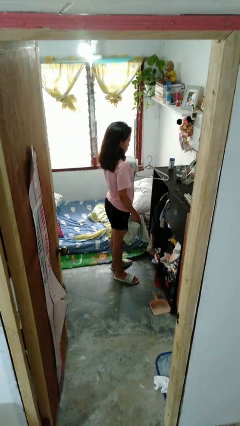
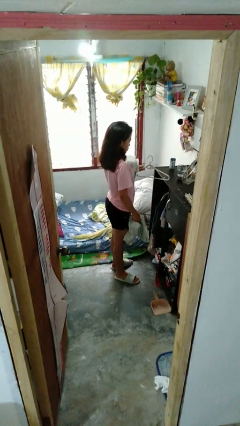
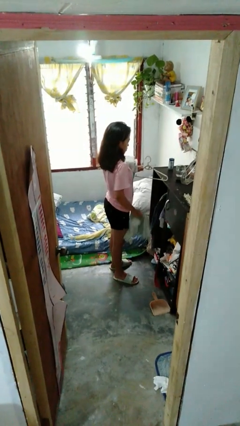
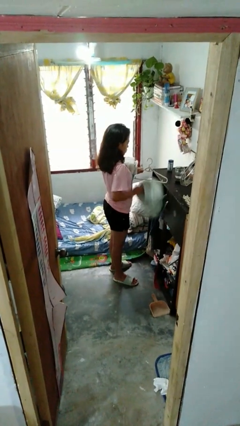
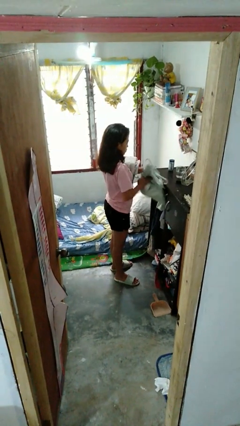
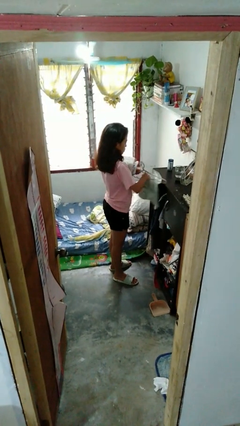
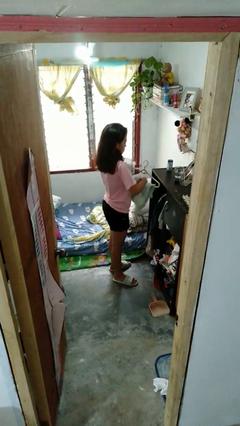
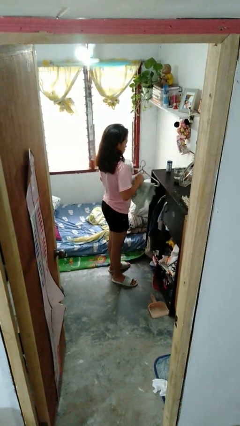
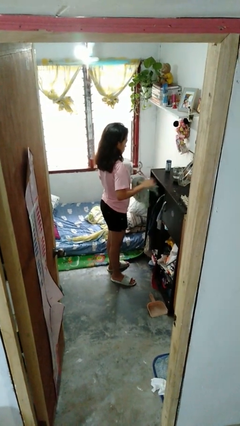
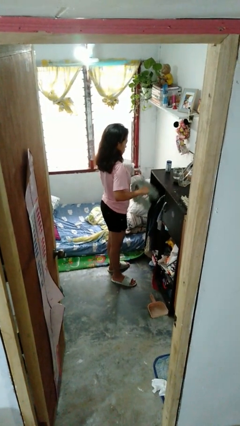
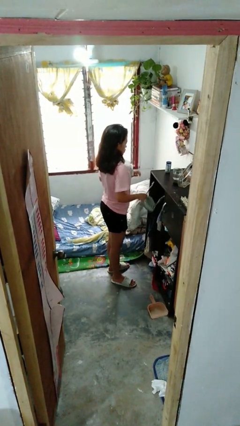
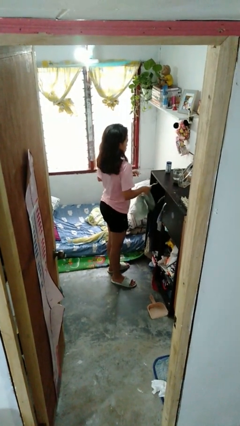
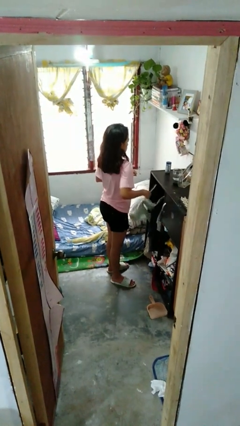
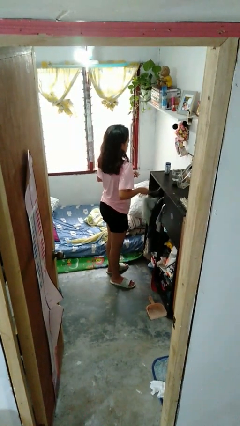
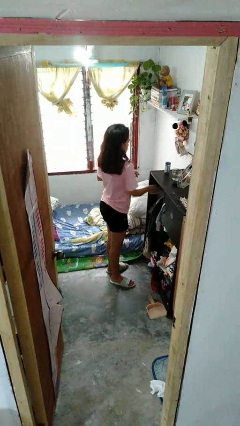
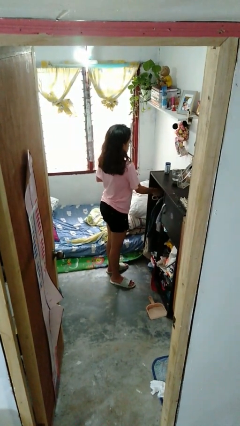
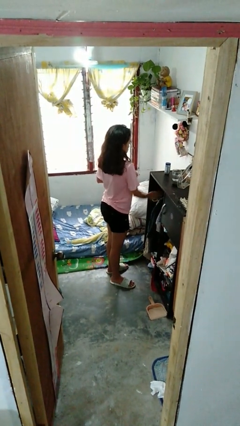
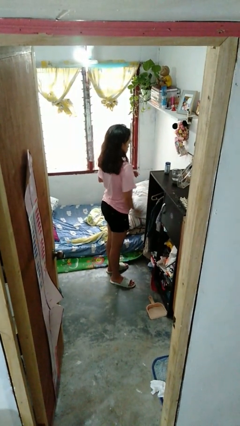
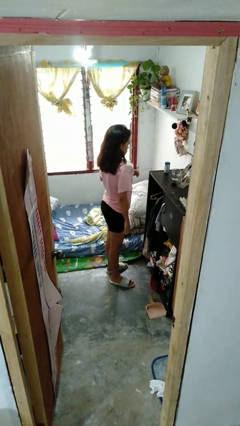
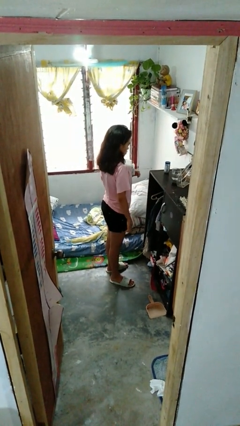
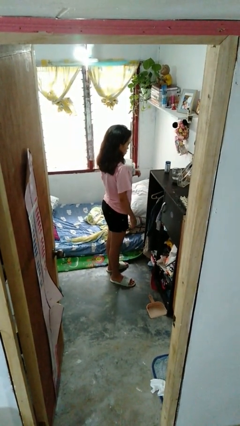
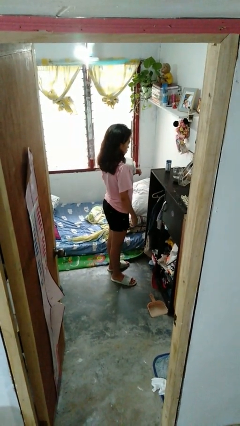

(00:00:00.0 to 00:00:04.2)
person puts clothes into closet

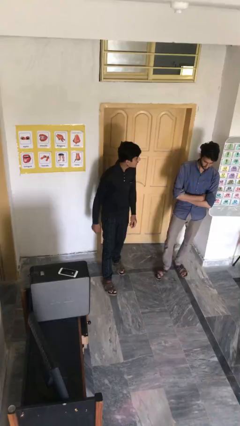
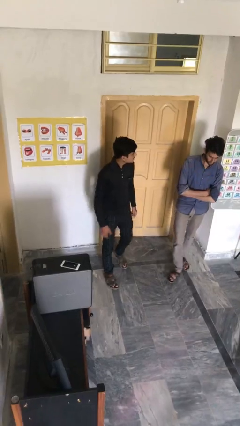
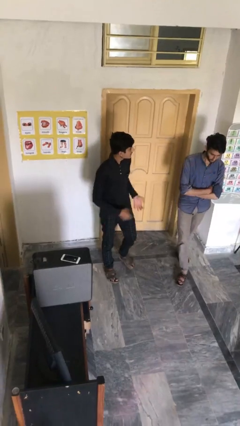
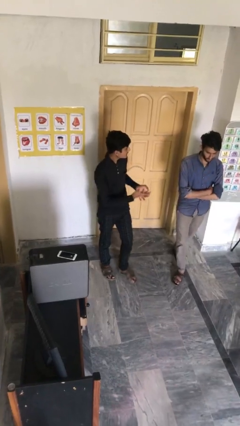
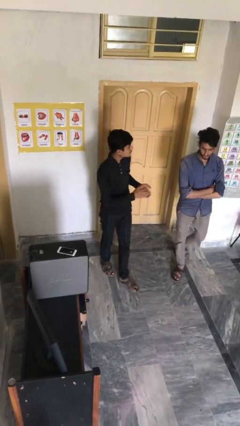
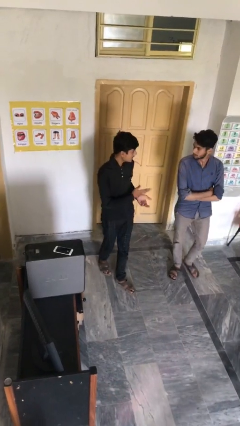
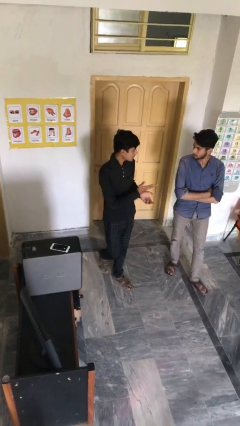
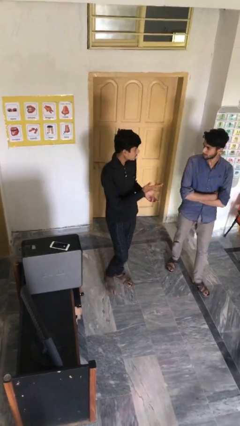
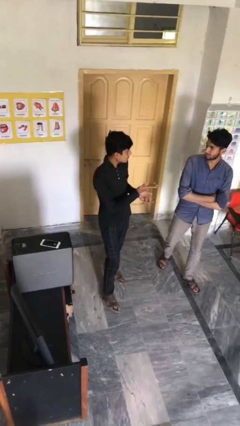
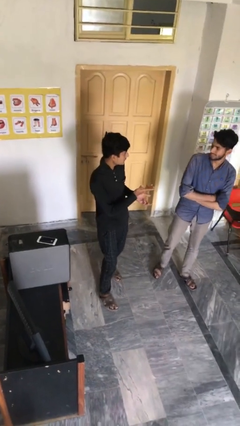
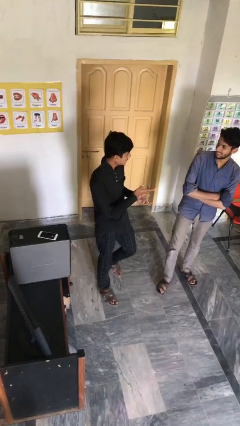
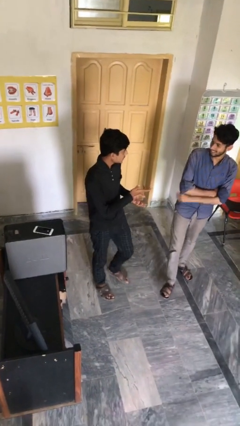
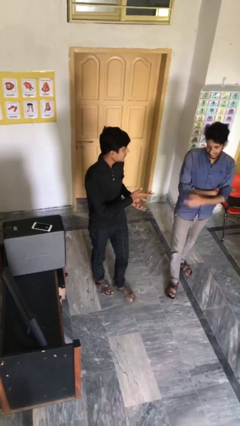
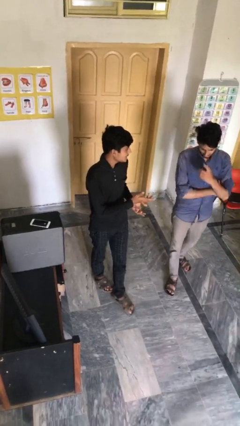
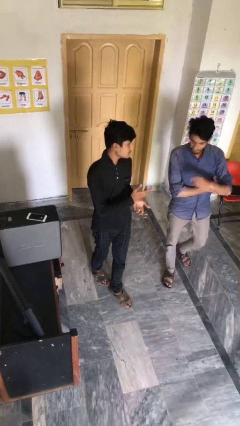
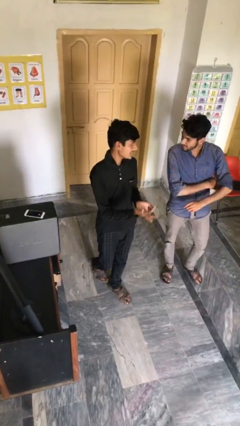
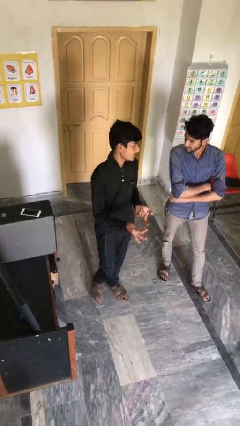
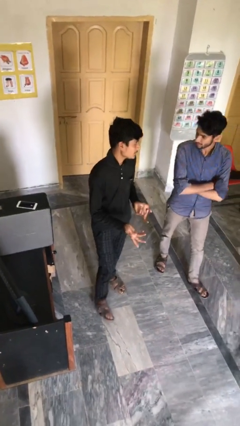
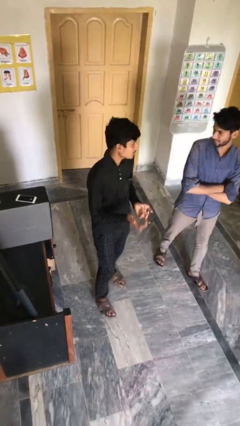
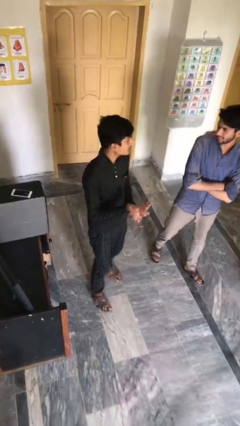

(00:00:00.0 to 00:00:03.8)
person talks to person

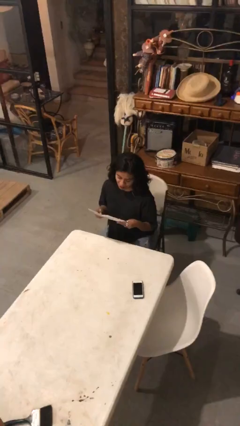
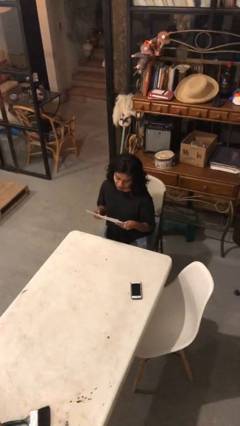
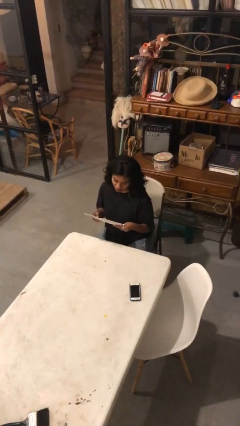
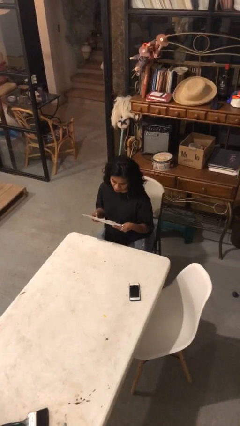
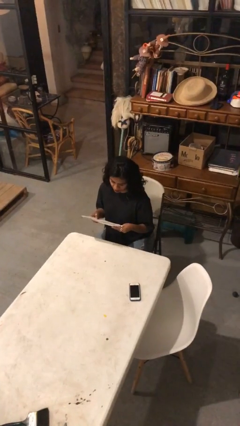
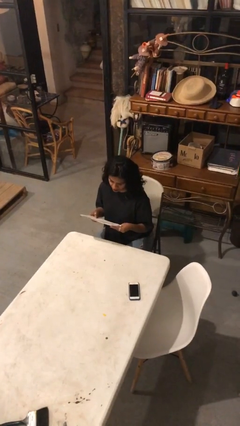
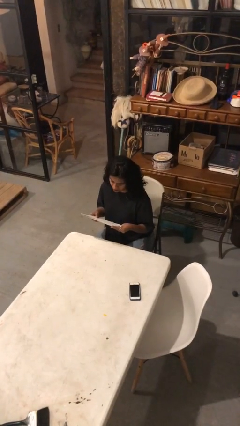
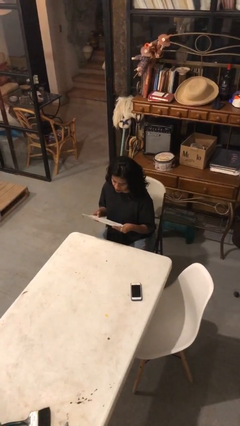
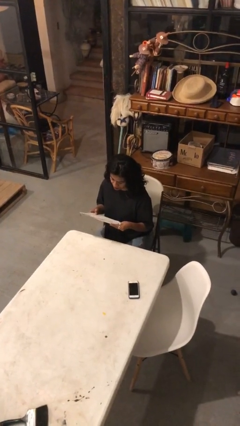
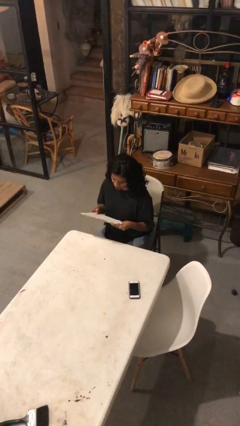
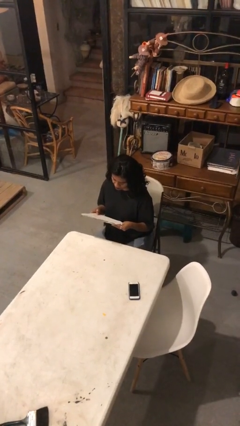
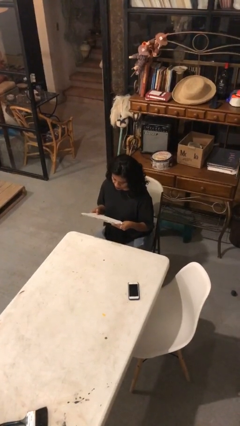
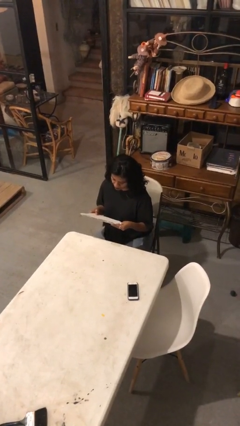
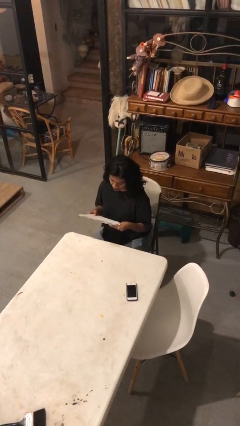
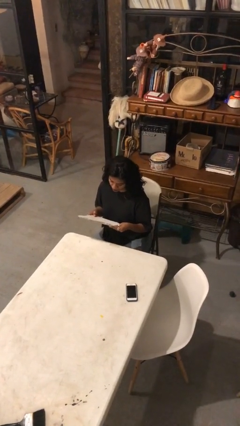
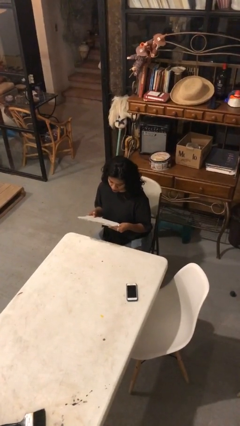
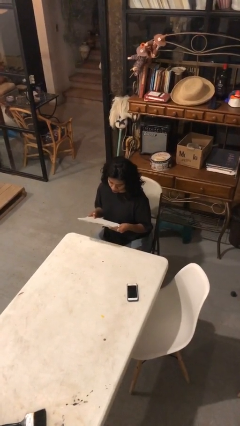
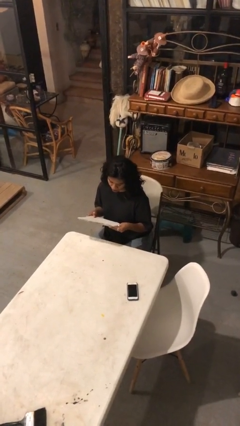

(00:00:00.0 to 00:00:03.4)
person reads document

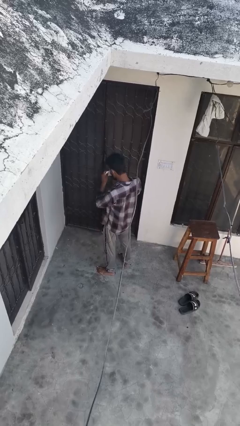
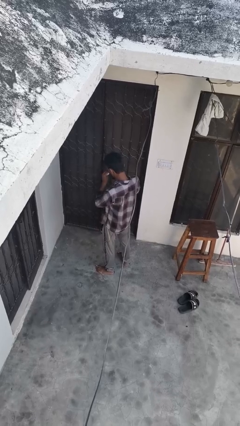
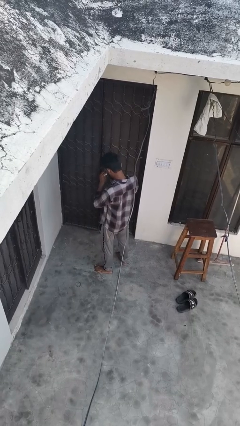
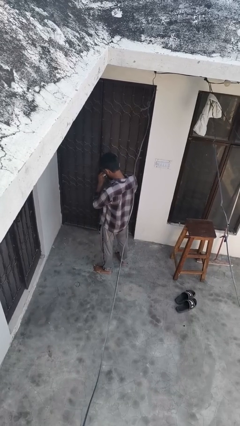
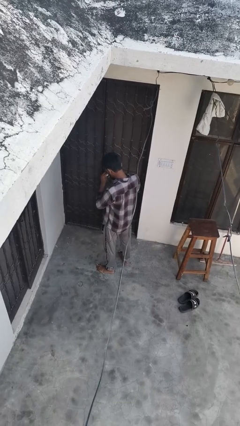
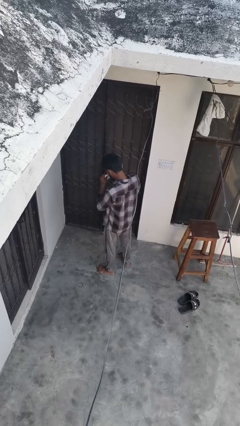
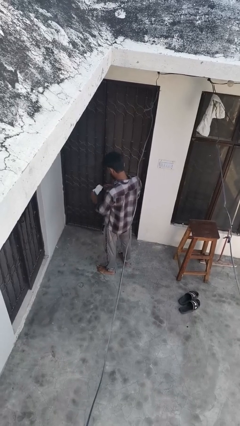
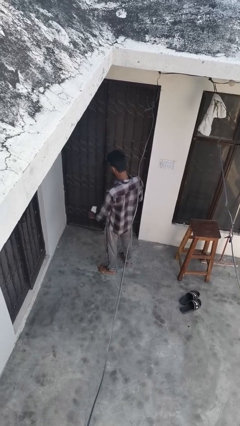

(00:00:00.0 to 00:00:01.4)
person wipes mouth with napkin

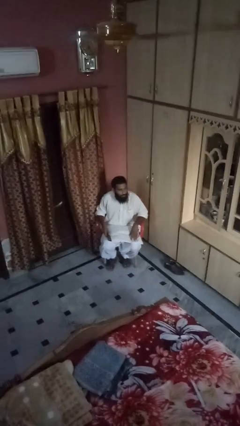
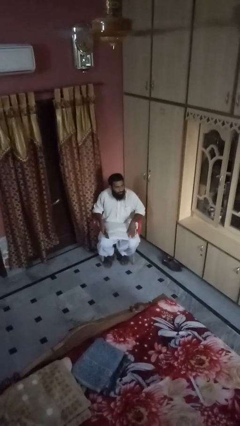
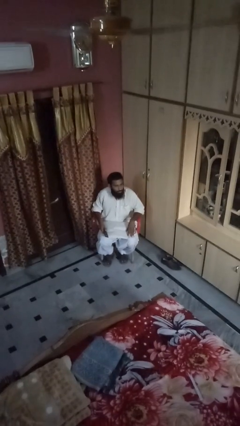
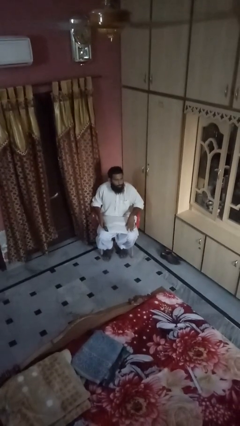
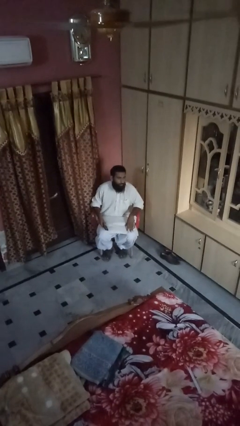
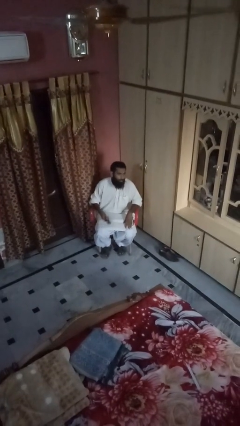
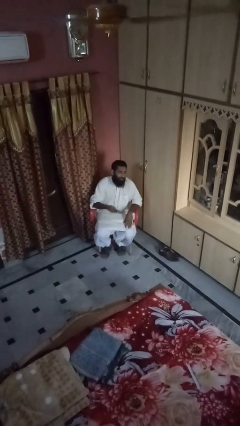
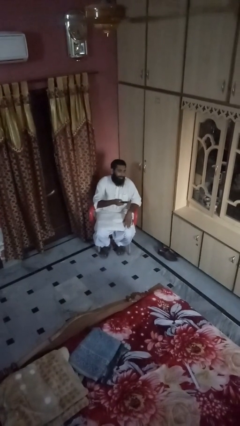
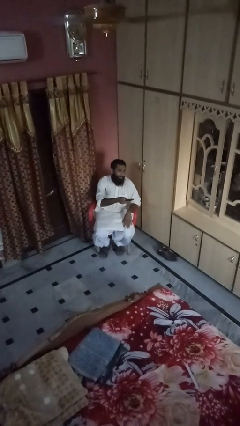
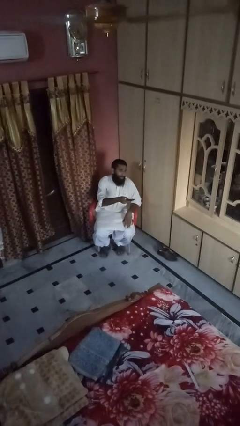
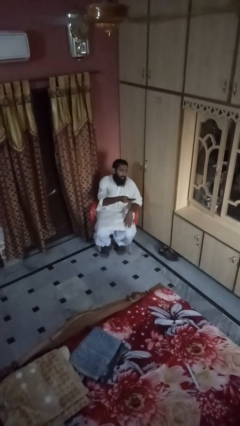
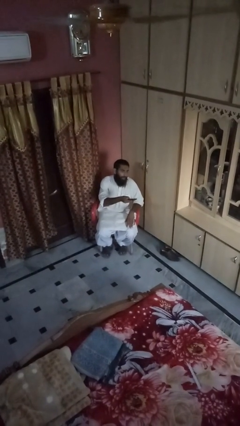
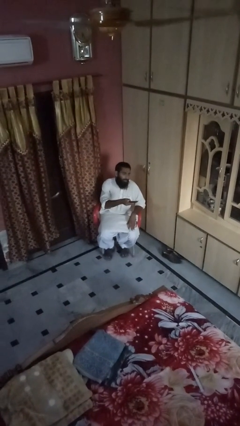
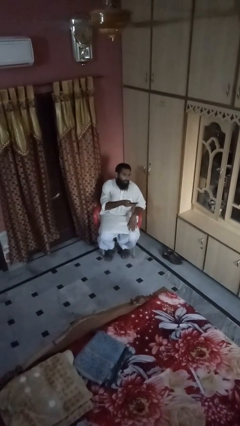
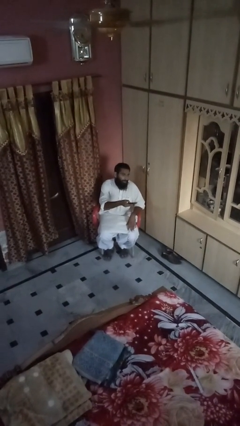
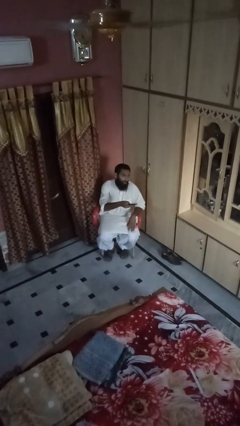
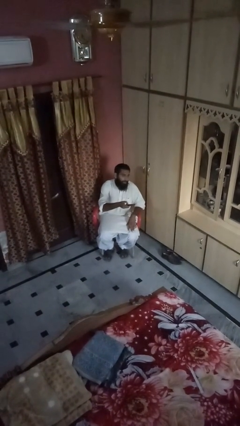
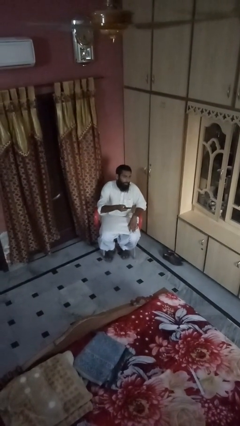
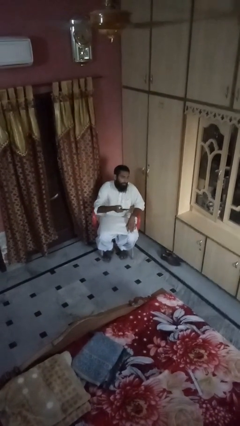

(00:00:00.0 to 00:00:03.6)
person uses television remote

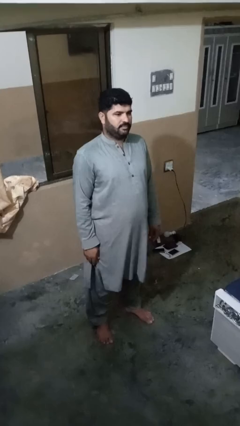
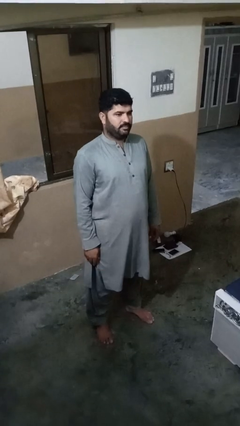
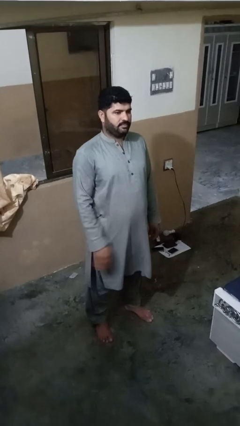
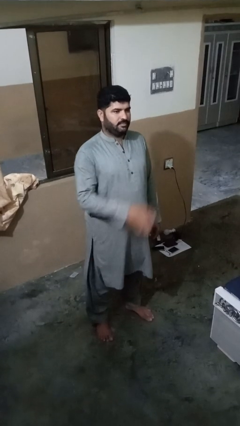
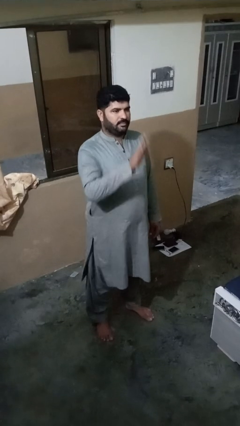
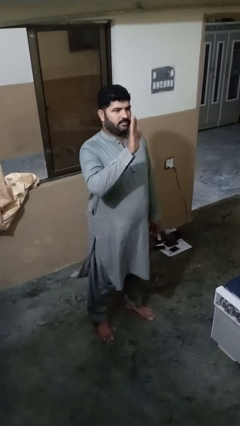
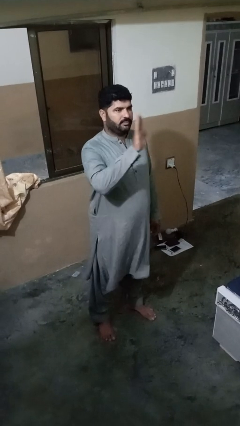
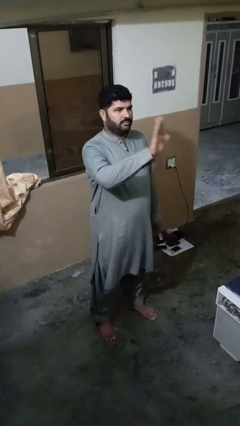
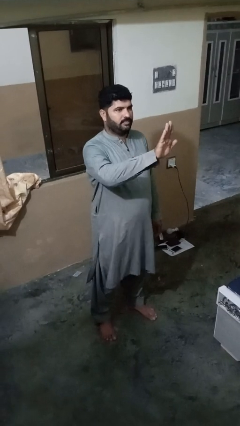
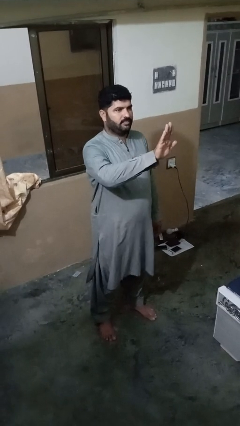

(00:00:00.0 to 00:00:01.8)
person gestures stop
